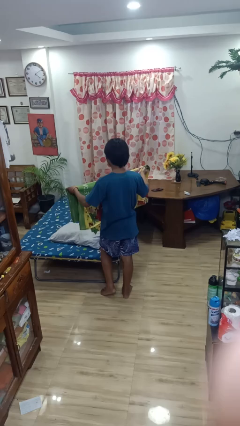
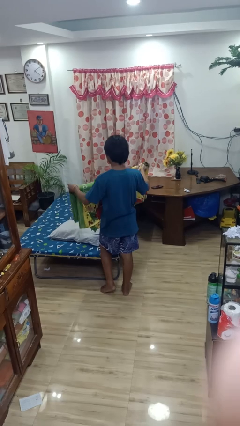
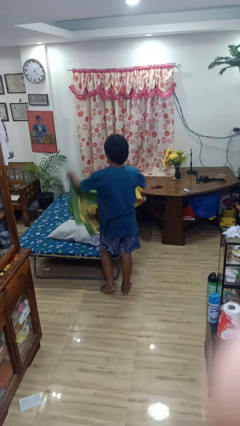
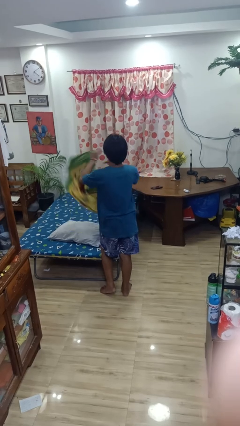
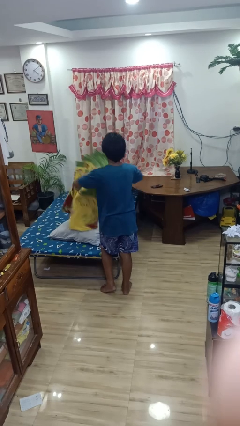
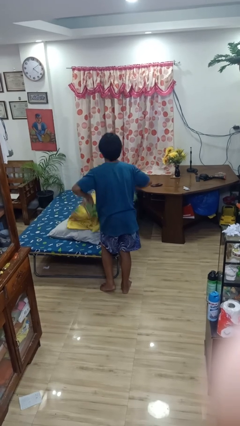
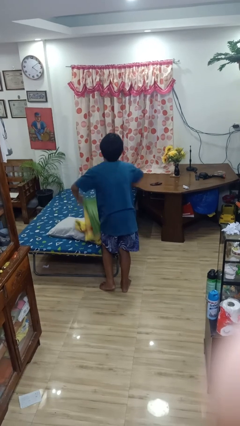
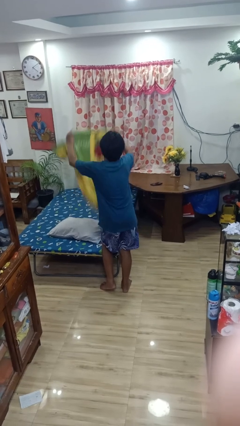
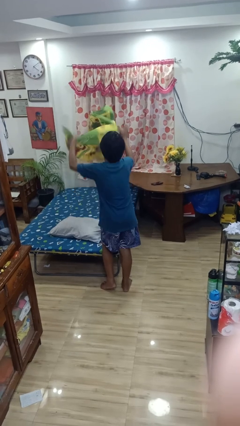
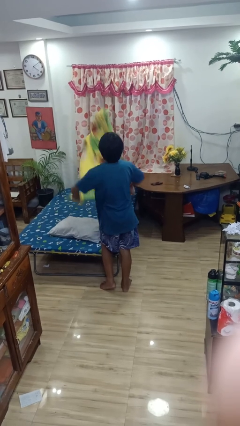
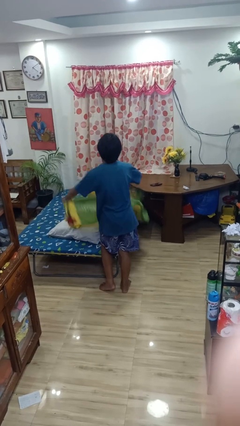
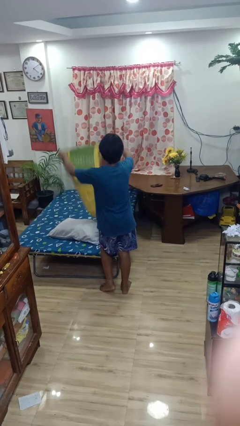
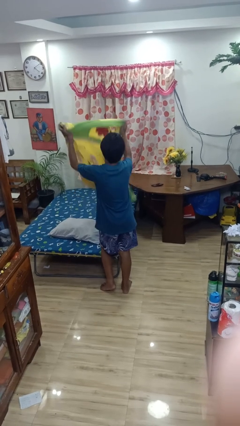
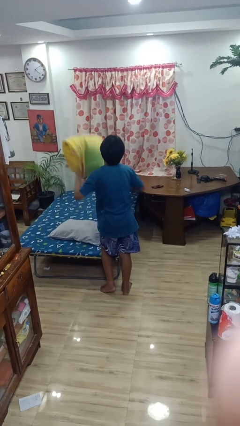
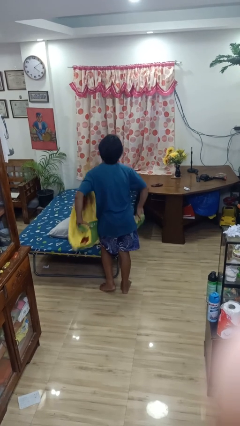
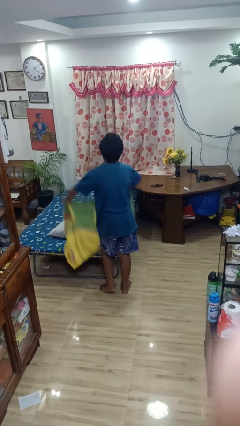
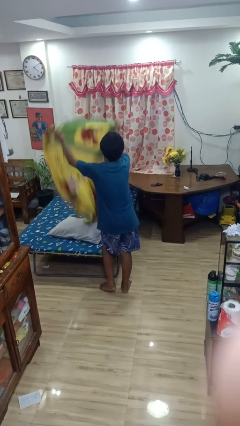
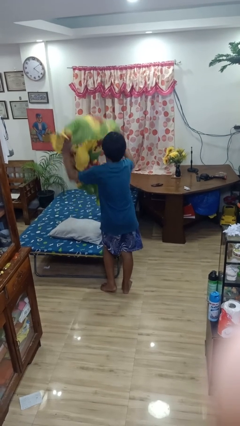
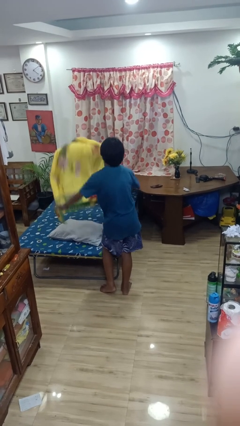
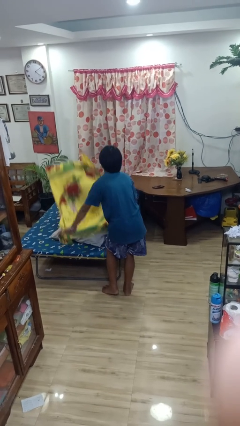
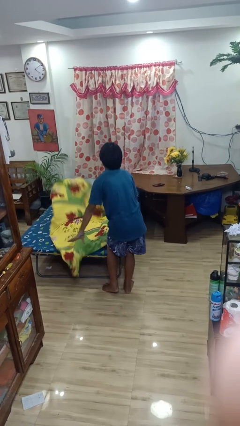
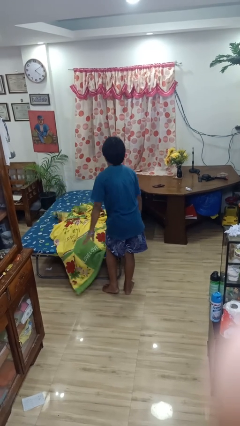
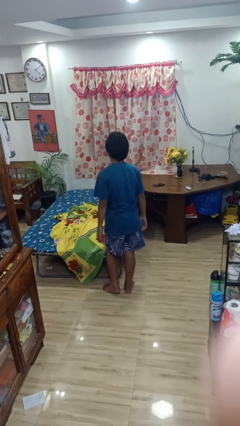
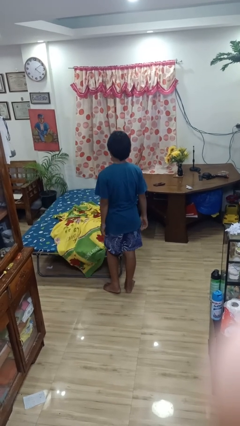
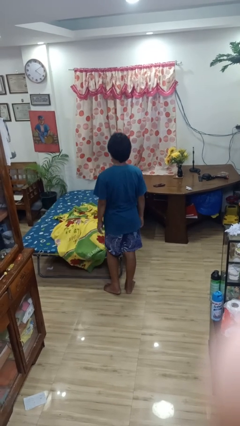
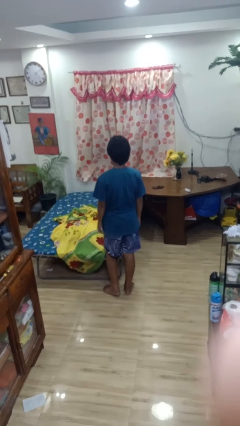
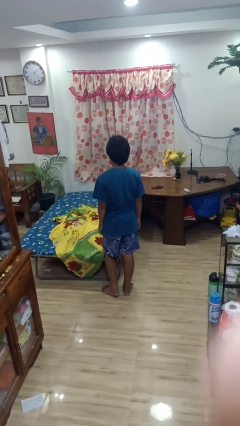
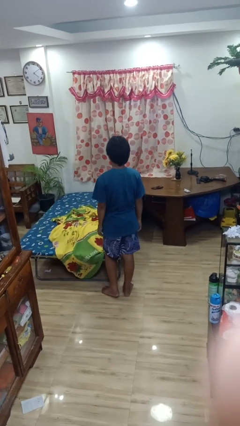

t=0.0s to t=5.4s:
person unfolds blanket

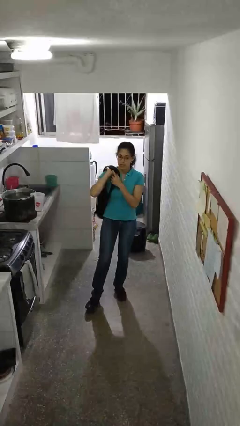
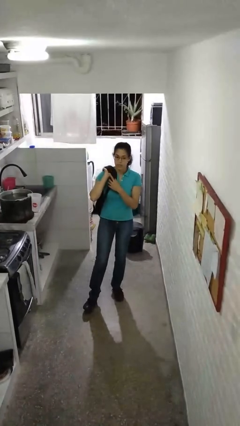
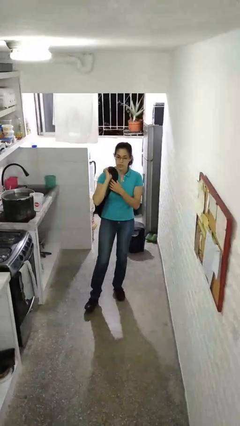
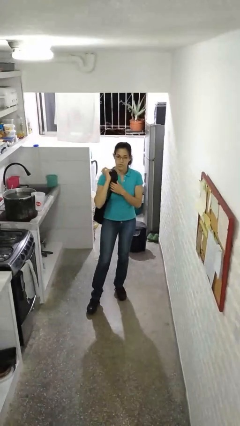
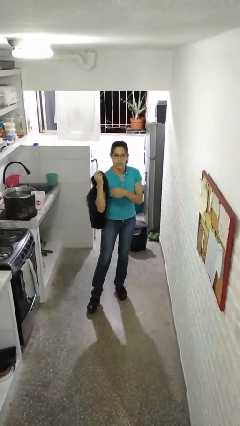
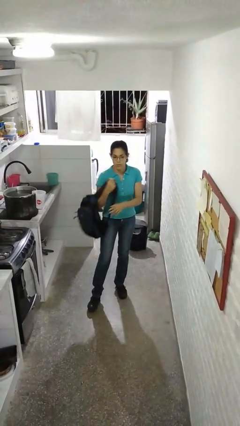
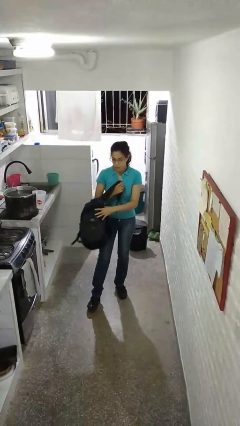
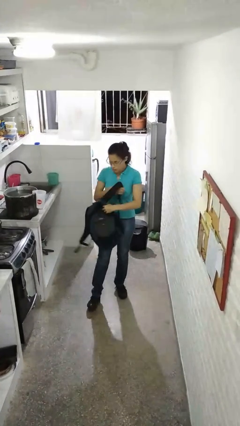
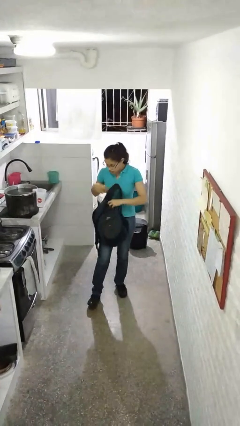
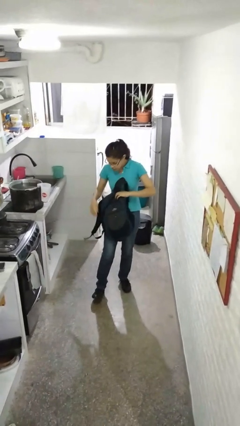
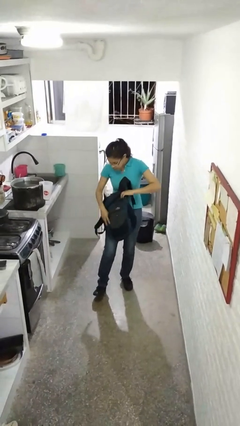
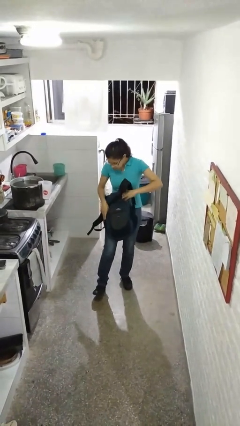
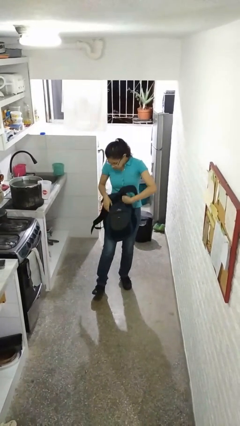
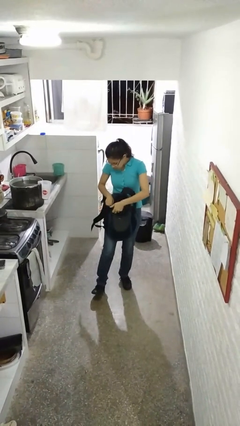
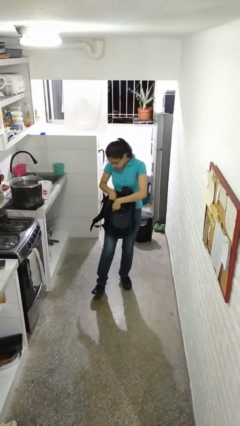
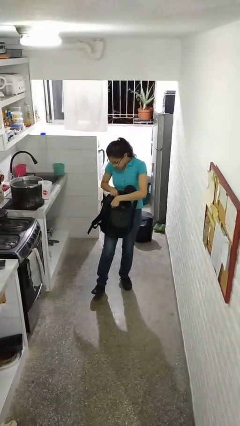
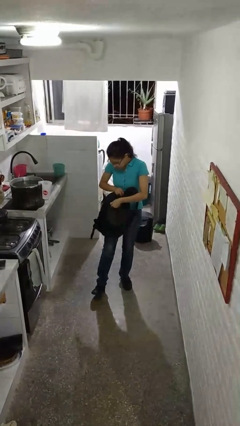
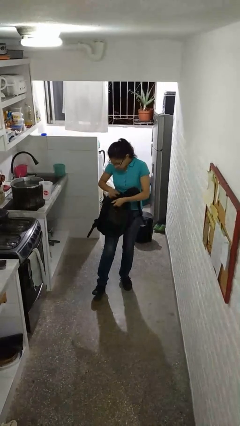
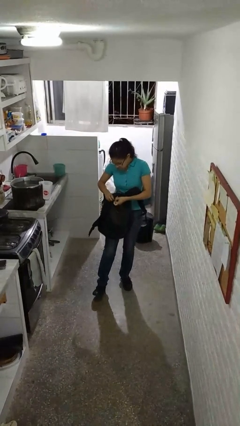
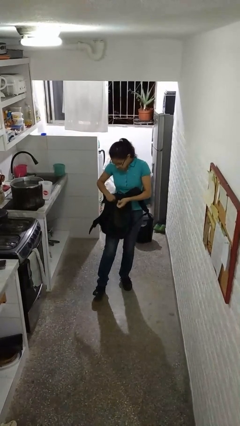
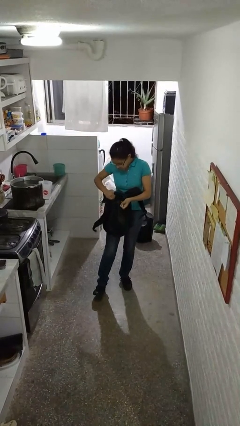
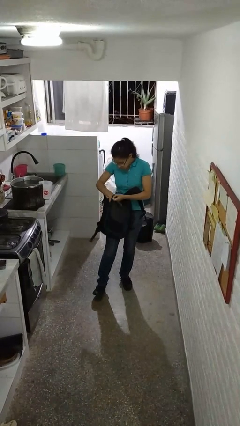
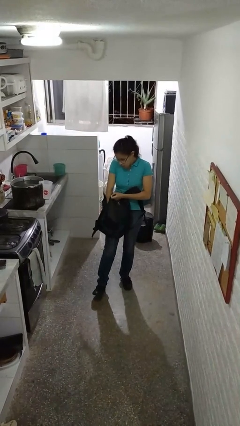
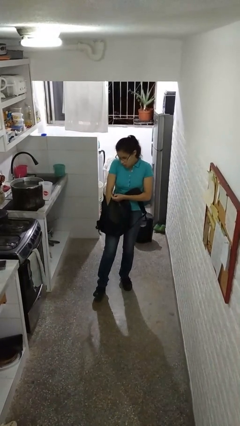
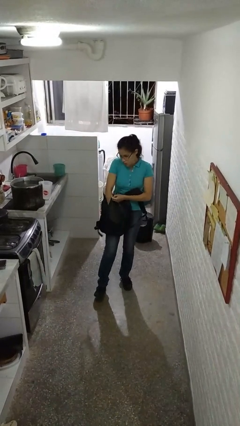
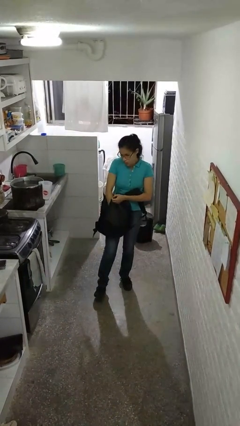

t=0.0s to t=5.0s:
person searches in backpack

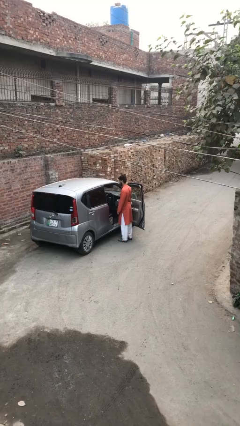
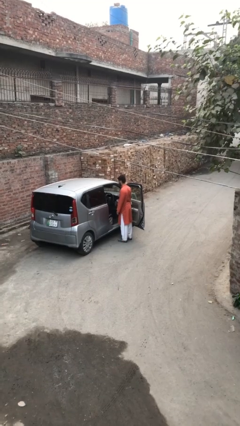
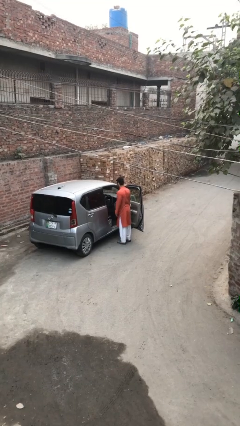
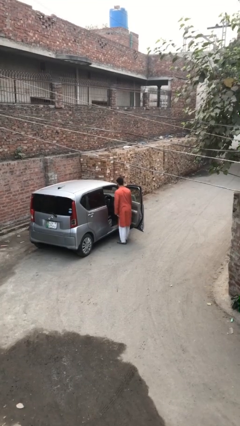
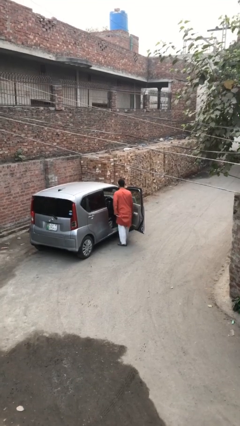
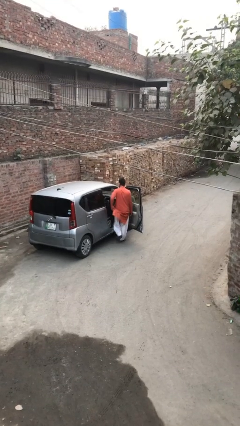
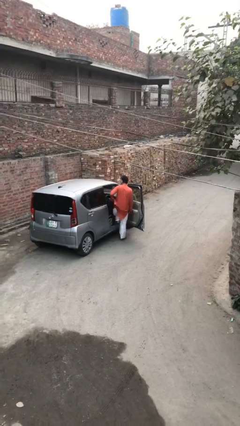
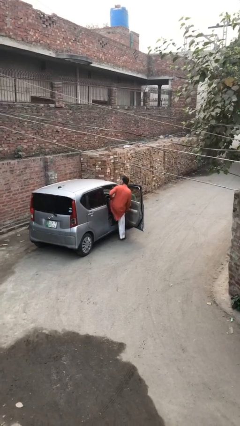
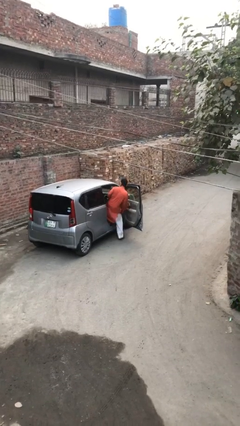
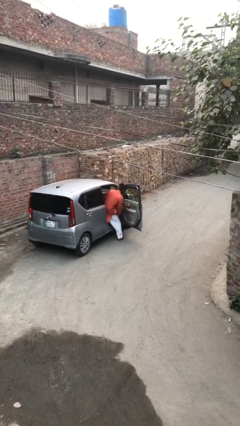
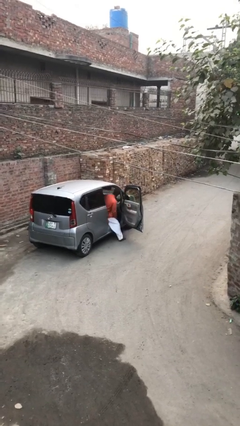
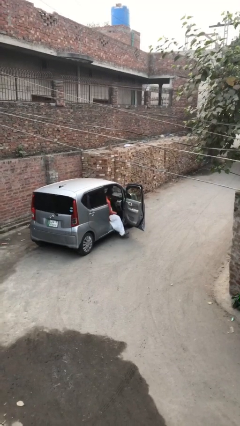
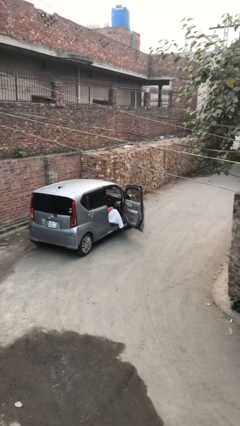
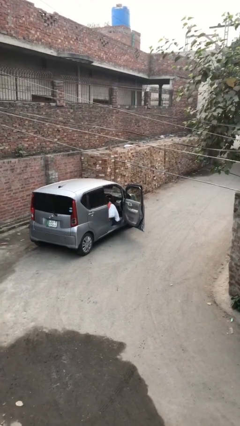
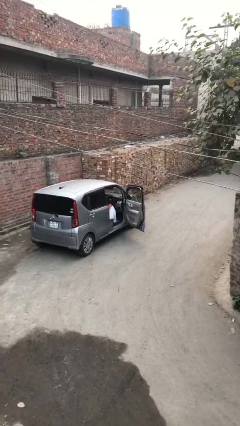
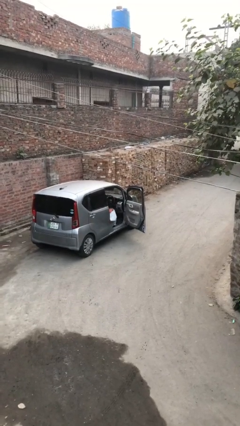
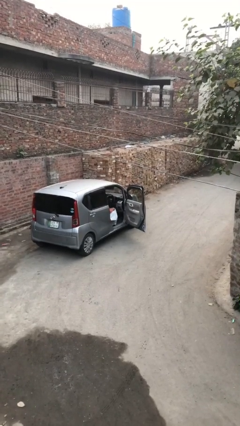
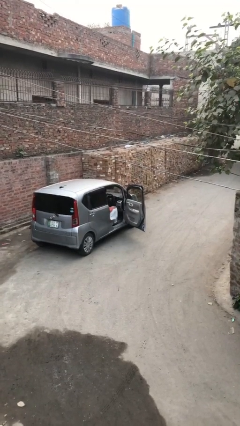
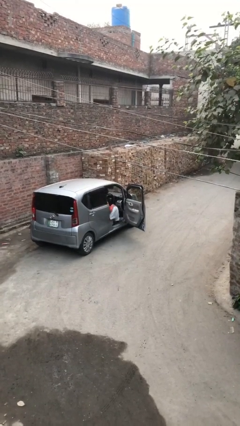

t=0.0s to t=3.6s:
person enters car

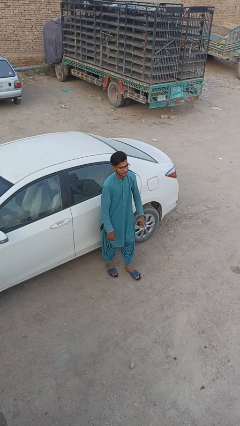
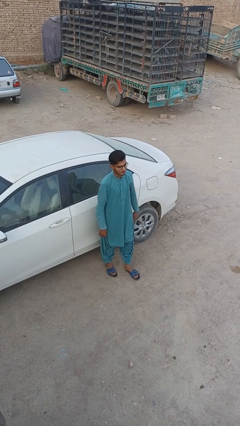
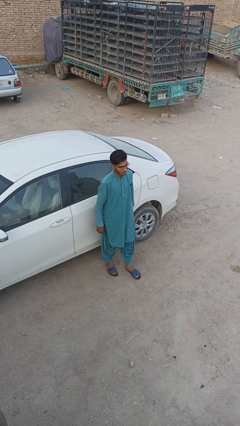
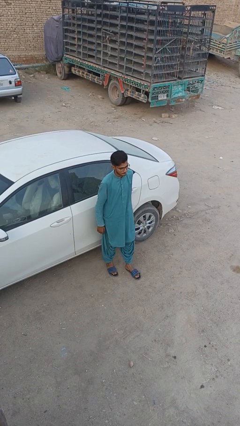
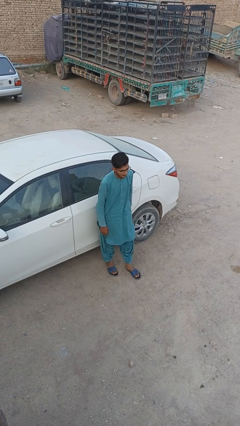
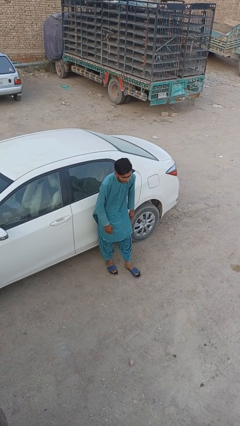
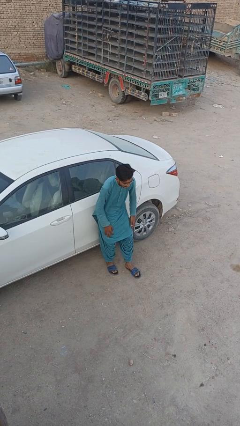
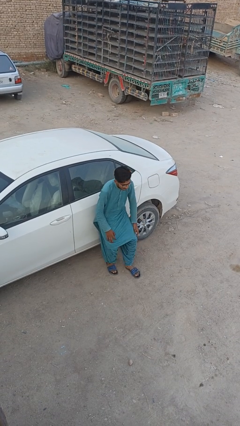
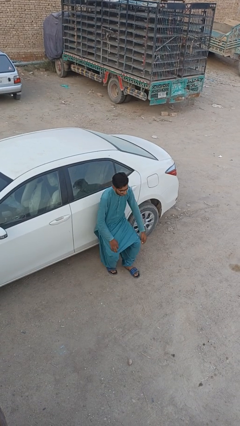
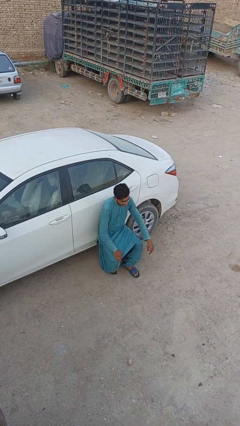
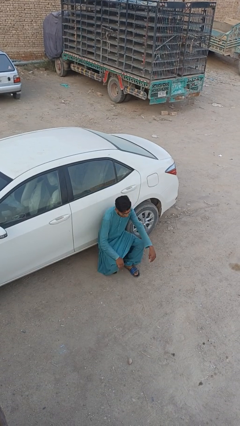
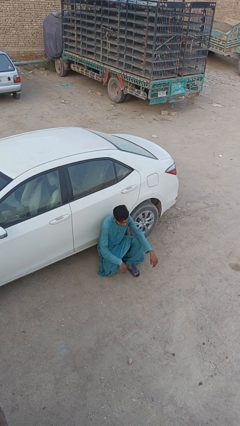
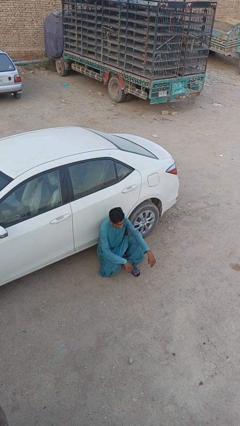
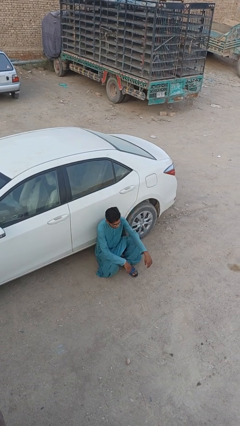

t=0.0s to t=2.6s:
person leans against car

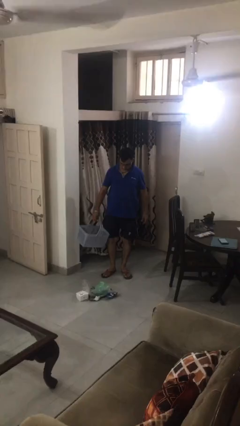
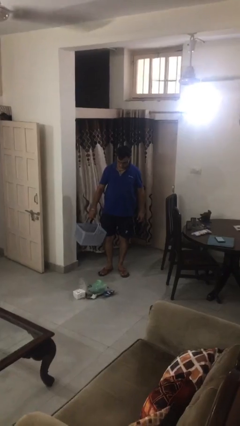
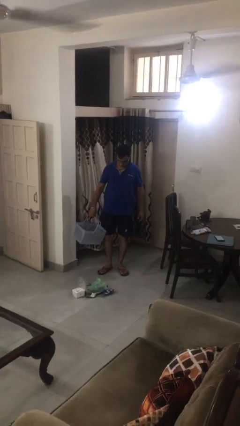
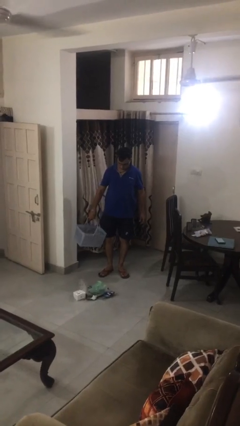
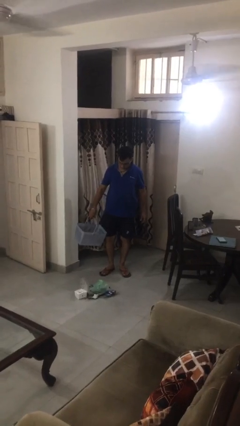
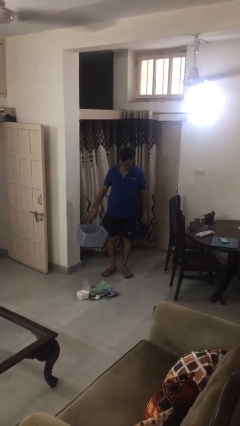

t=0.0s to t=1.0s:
person unloads box onto floor

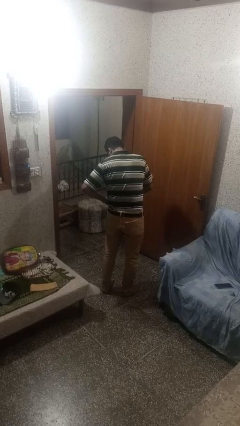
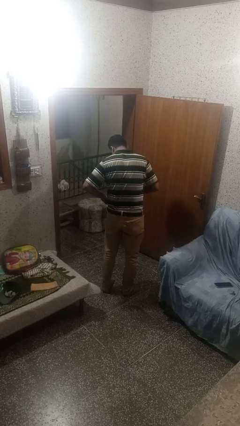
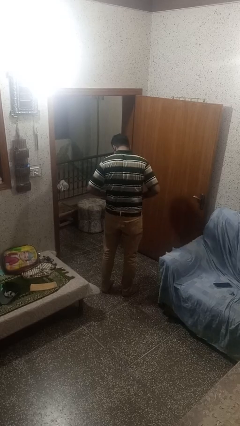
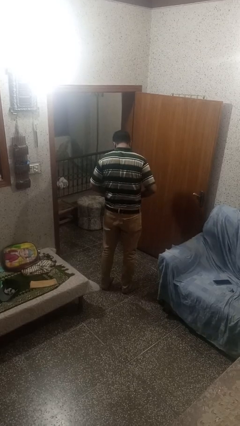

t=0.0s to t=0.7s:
person untucks shirt
